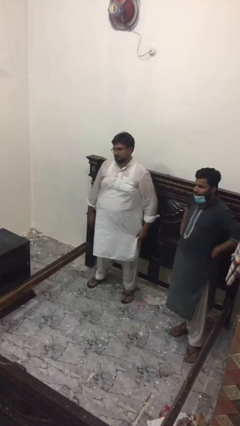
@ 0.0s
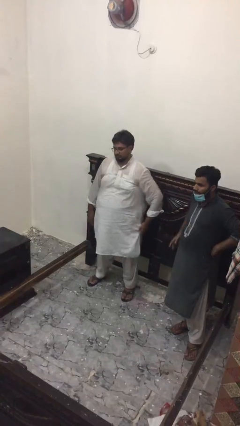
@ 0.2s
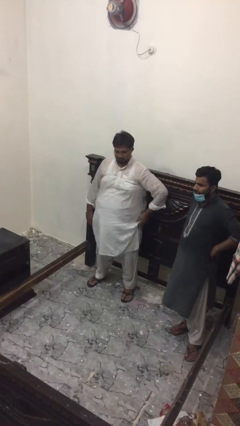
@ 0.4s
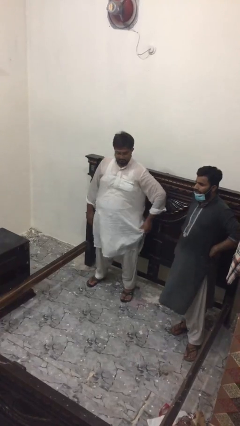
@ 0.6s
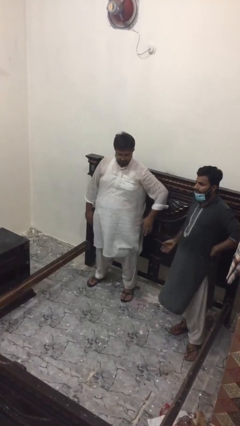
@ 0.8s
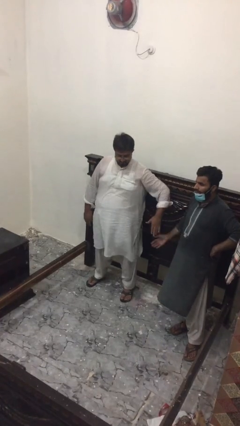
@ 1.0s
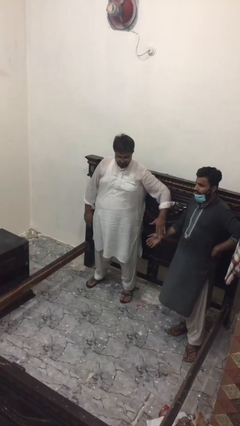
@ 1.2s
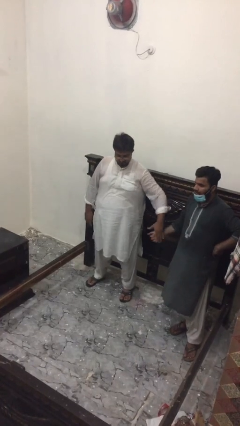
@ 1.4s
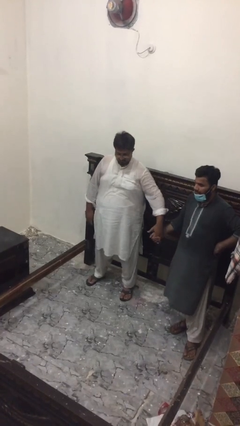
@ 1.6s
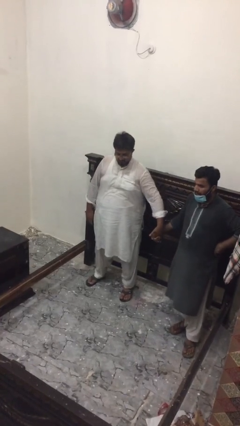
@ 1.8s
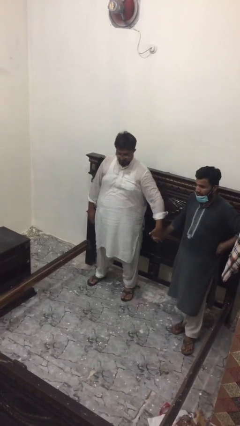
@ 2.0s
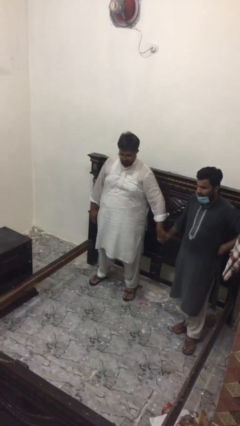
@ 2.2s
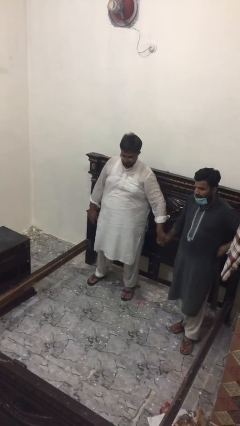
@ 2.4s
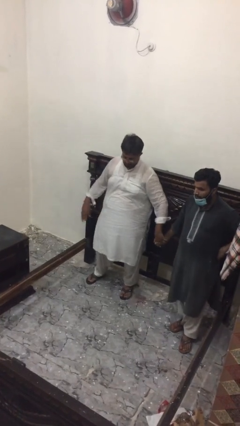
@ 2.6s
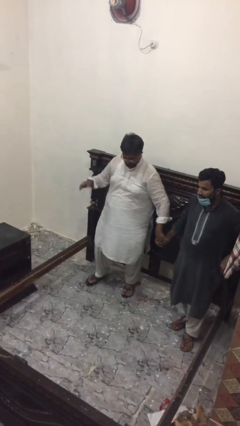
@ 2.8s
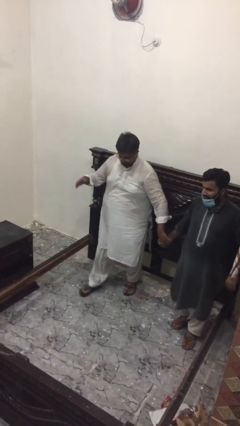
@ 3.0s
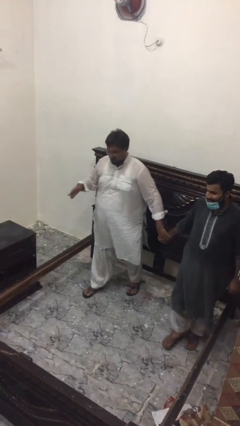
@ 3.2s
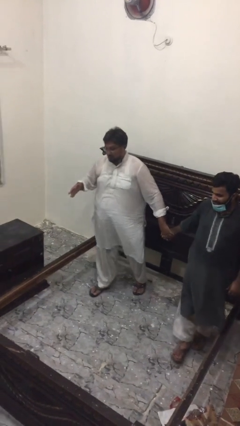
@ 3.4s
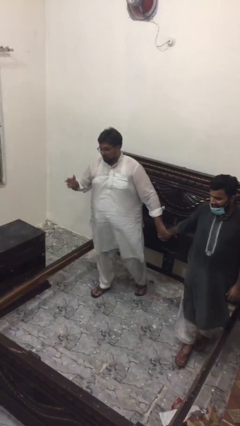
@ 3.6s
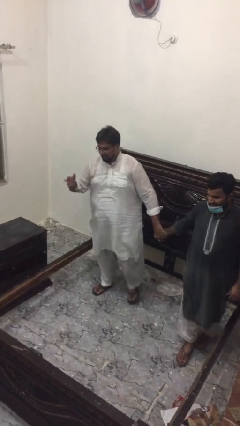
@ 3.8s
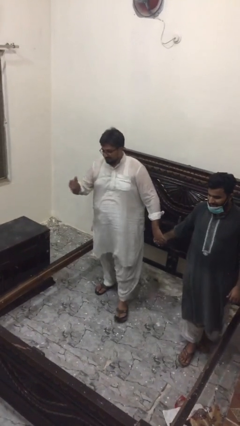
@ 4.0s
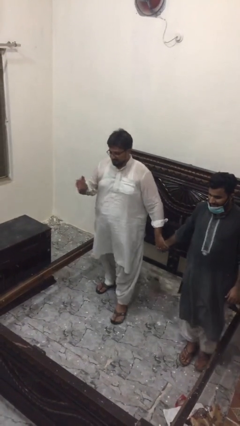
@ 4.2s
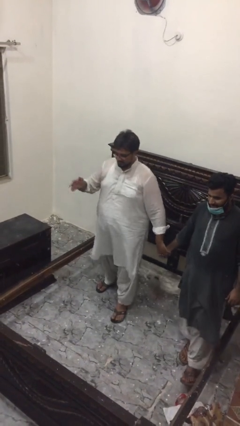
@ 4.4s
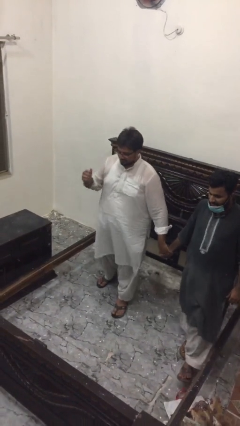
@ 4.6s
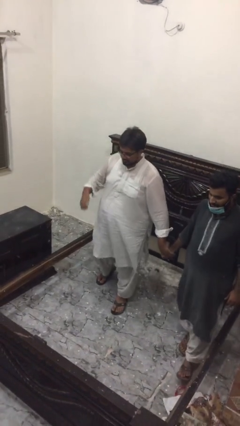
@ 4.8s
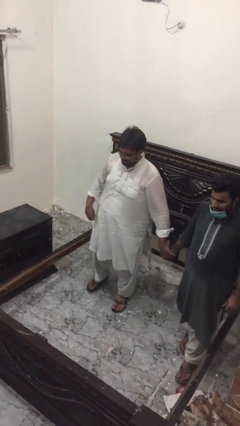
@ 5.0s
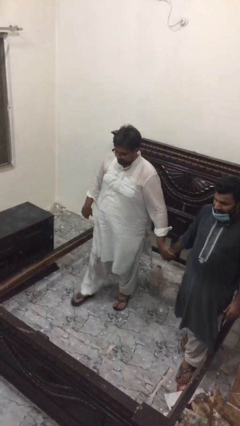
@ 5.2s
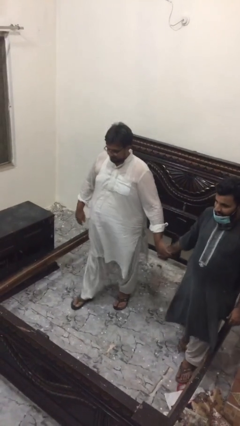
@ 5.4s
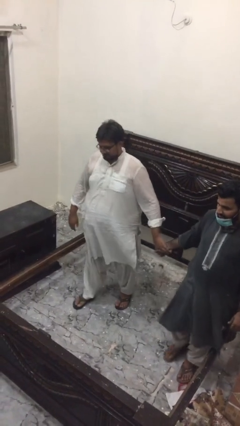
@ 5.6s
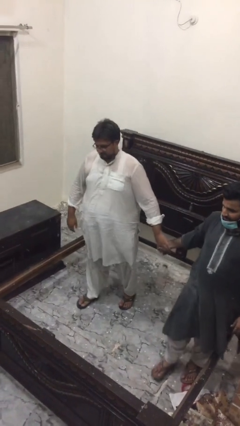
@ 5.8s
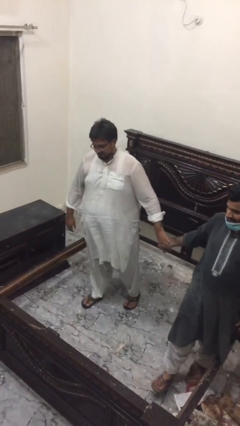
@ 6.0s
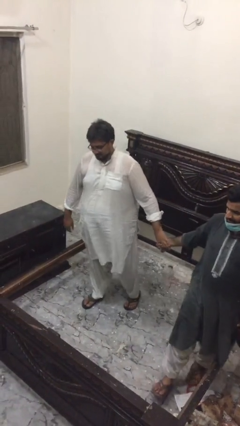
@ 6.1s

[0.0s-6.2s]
person holds hand

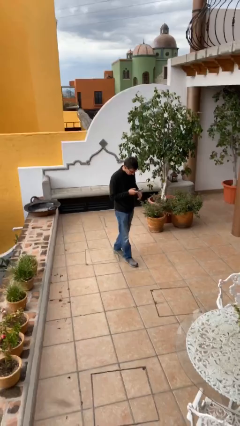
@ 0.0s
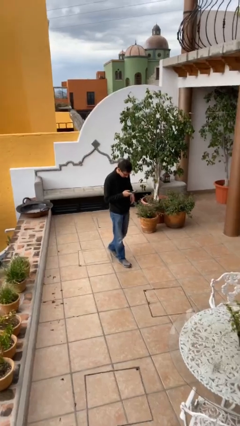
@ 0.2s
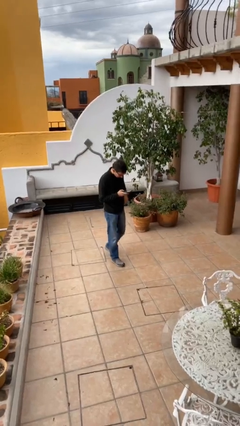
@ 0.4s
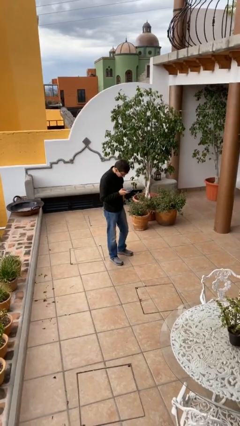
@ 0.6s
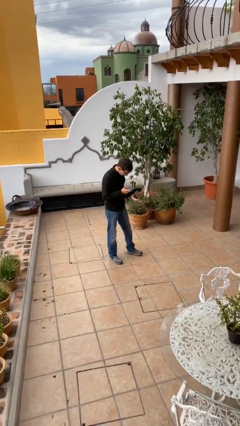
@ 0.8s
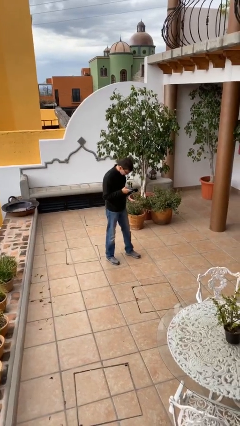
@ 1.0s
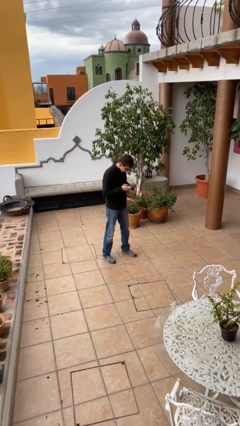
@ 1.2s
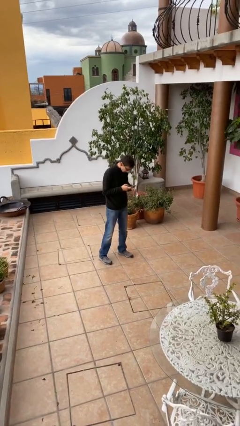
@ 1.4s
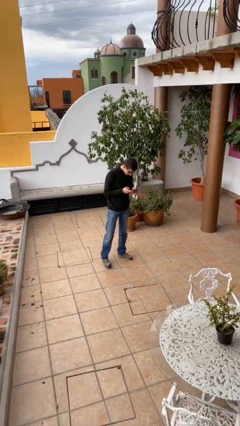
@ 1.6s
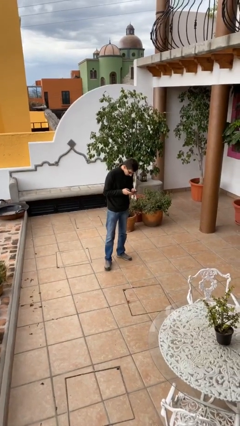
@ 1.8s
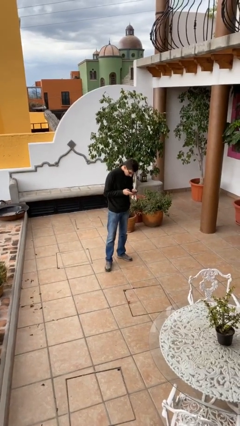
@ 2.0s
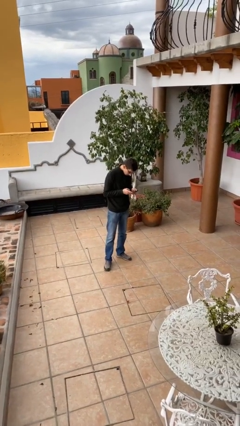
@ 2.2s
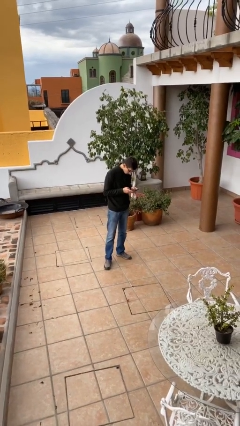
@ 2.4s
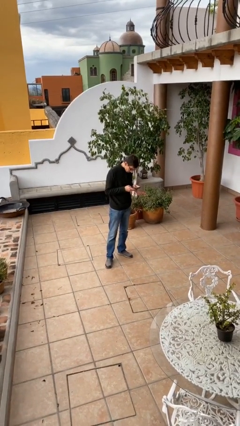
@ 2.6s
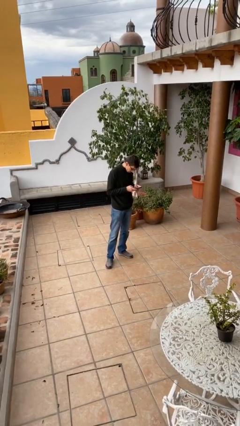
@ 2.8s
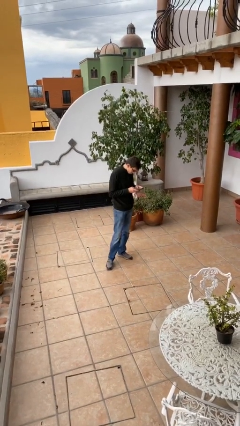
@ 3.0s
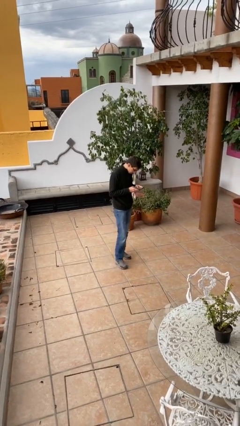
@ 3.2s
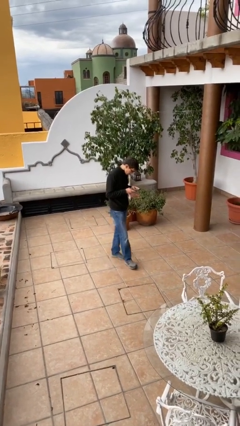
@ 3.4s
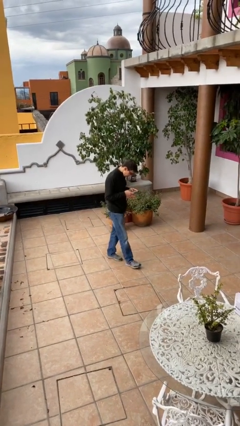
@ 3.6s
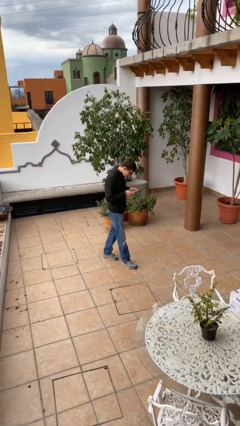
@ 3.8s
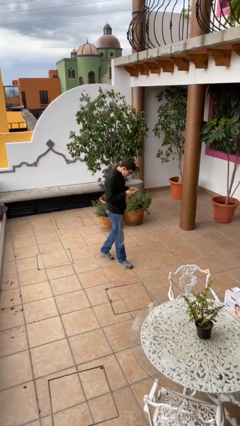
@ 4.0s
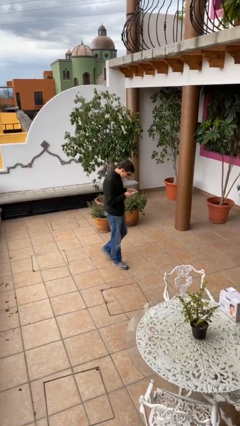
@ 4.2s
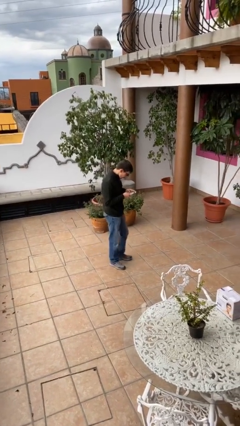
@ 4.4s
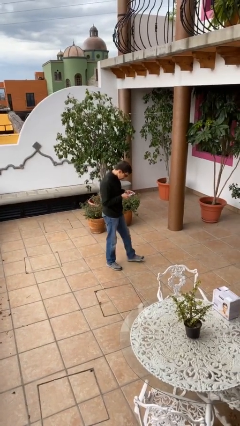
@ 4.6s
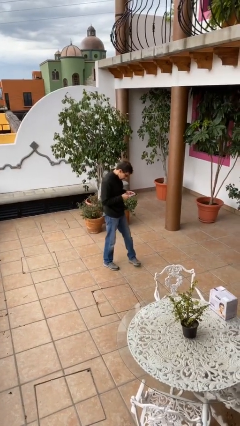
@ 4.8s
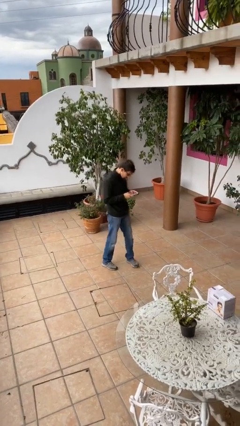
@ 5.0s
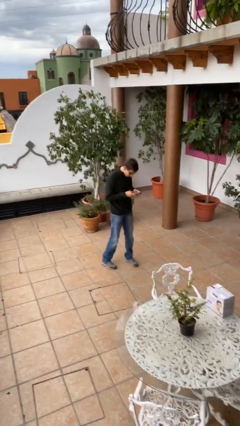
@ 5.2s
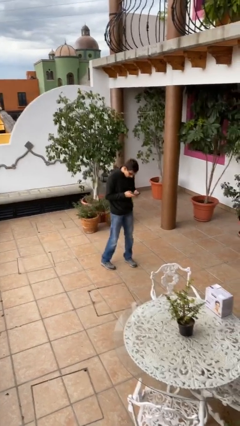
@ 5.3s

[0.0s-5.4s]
person texts on phone

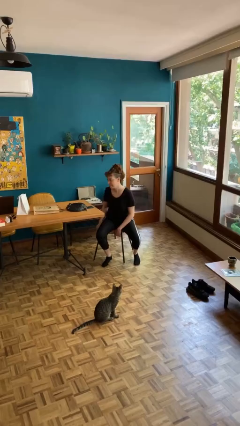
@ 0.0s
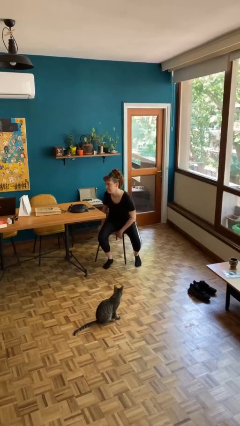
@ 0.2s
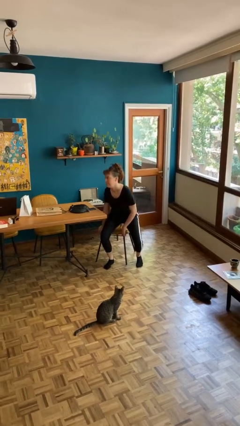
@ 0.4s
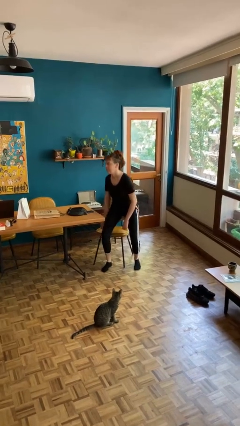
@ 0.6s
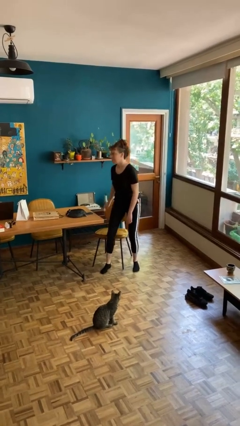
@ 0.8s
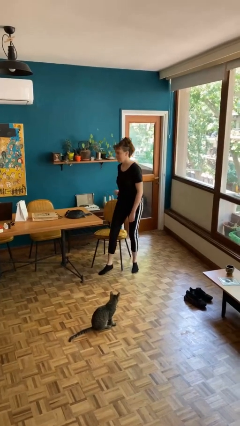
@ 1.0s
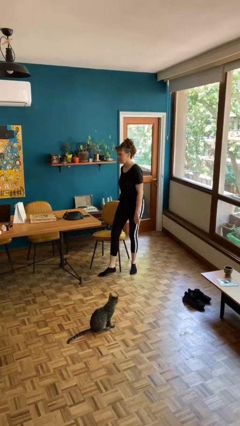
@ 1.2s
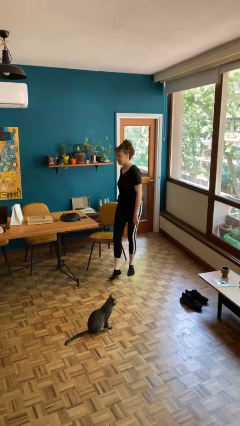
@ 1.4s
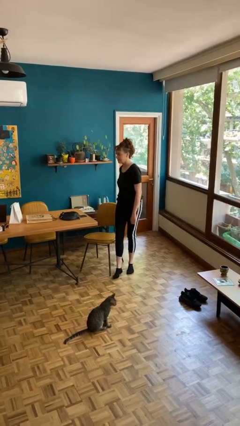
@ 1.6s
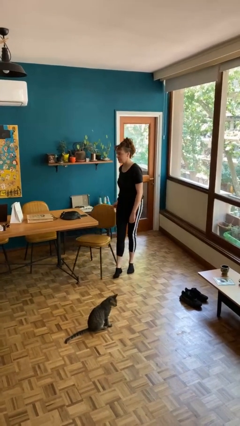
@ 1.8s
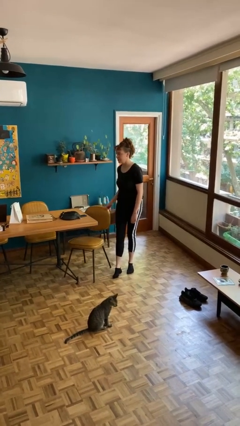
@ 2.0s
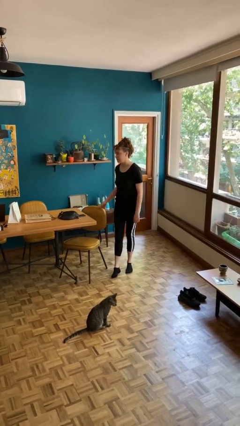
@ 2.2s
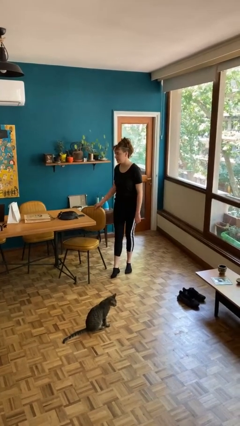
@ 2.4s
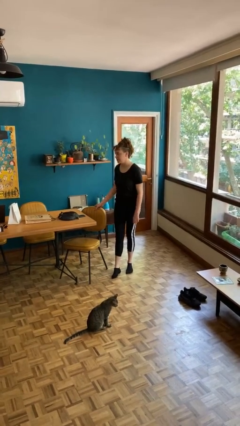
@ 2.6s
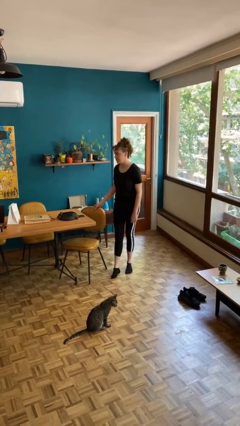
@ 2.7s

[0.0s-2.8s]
person stands up

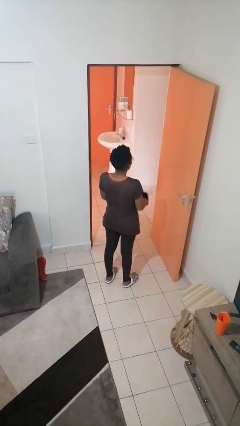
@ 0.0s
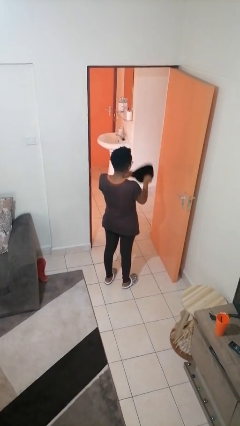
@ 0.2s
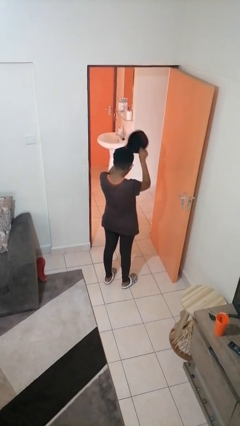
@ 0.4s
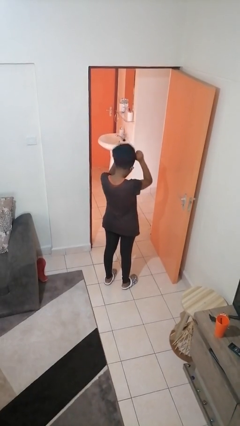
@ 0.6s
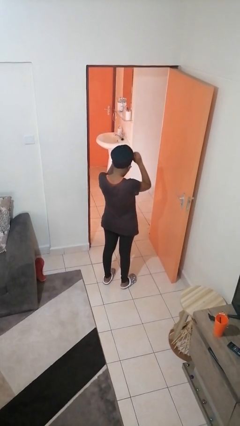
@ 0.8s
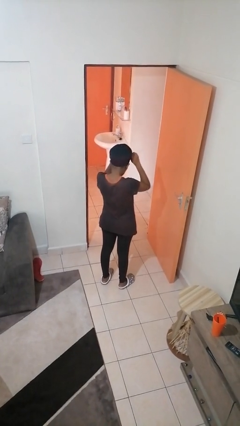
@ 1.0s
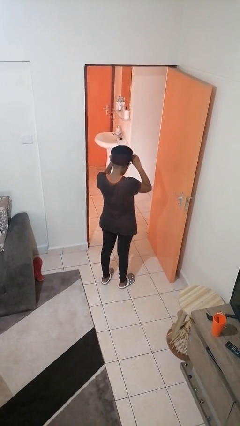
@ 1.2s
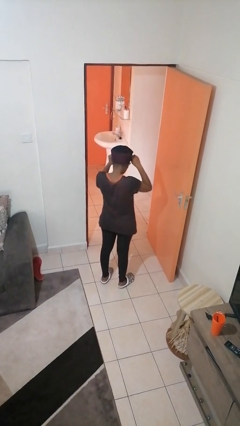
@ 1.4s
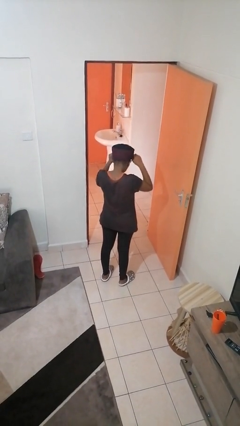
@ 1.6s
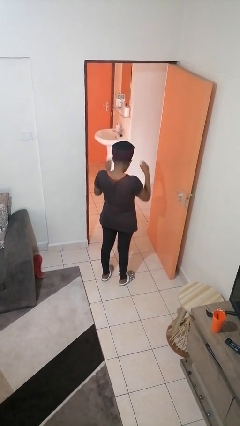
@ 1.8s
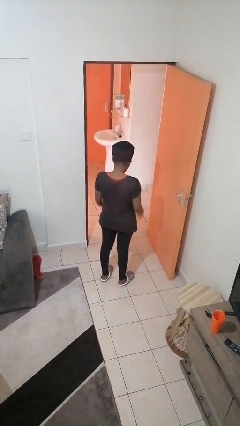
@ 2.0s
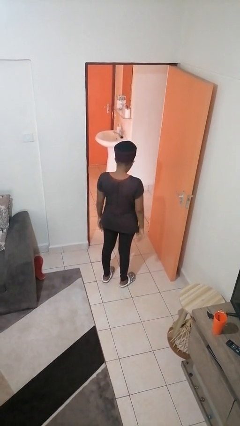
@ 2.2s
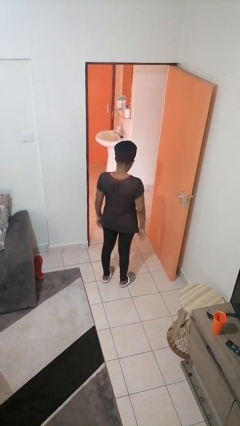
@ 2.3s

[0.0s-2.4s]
person puts on hat

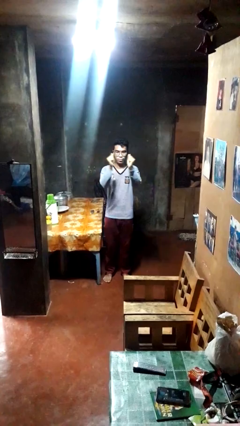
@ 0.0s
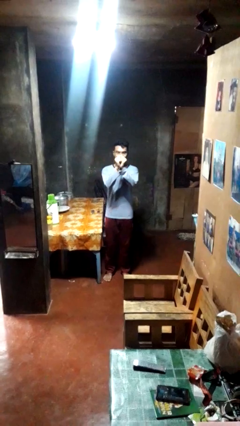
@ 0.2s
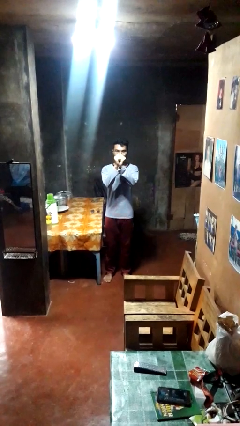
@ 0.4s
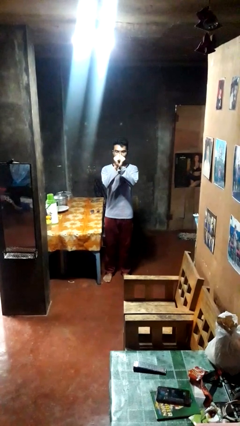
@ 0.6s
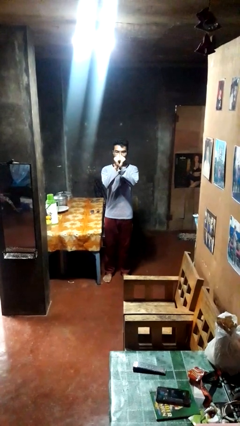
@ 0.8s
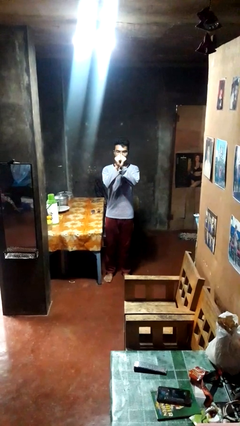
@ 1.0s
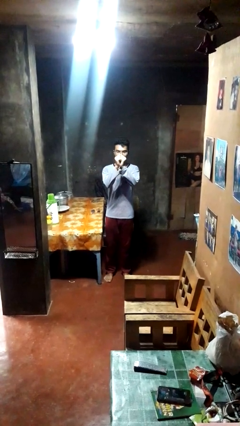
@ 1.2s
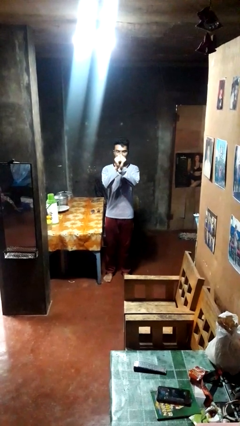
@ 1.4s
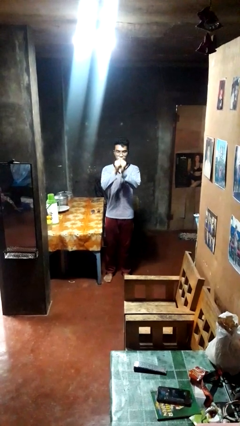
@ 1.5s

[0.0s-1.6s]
person gestures zoom out
